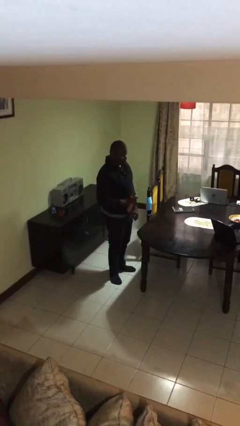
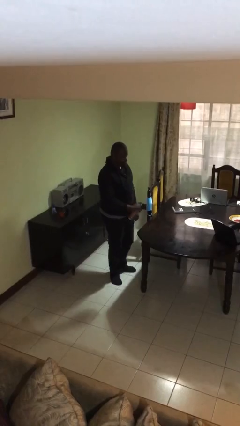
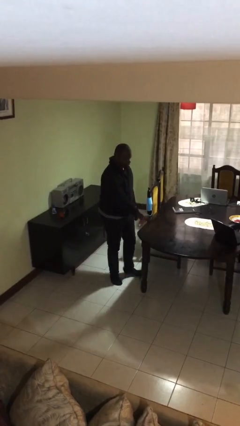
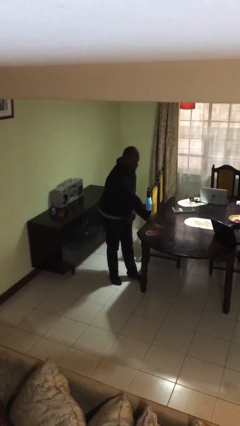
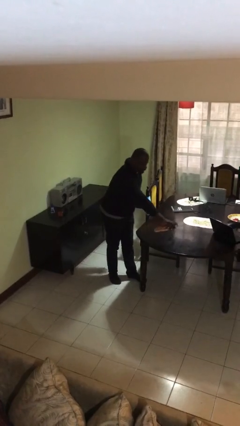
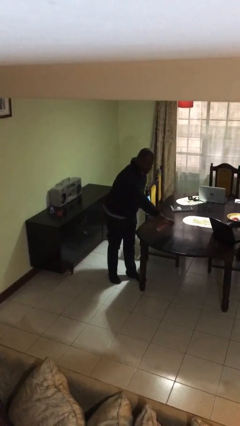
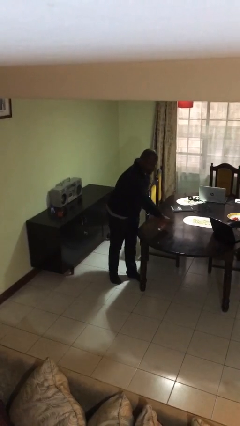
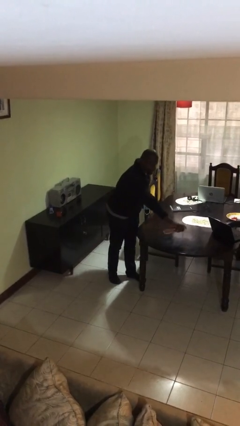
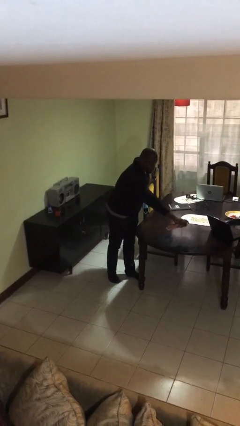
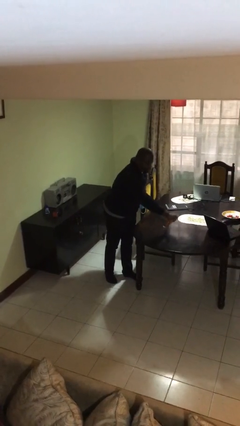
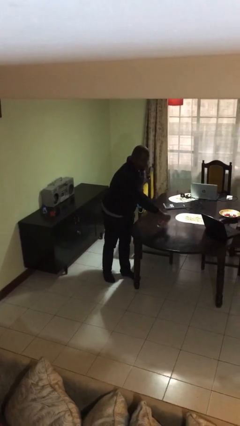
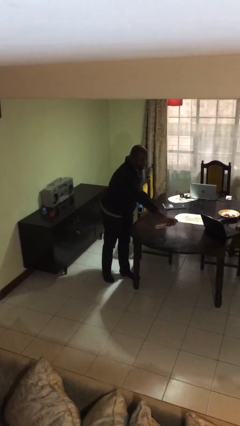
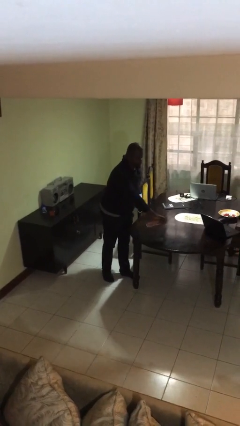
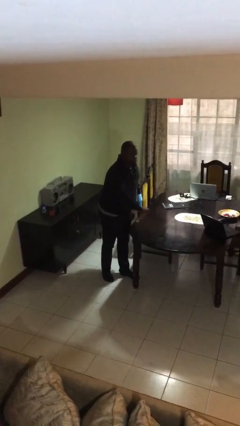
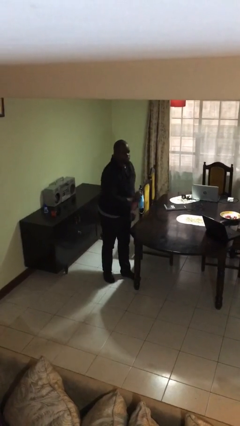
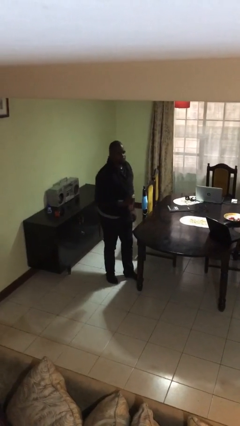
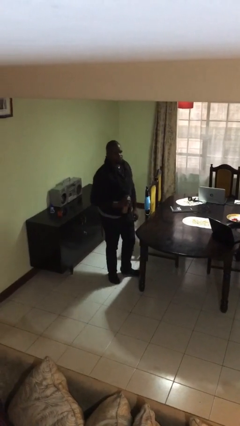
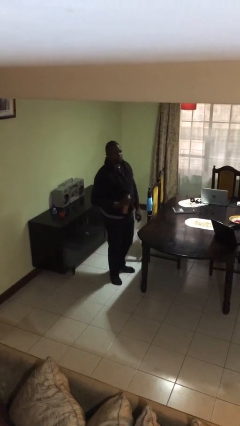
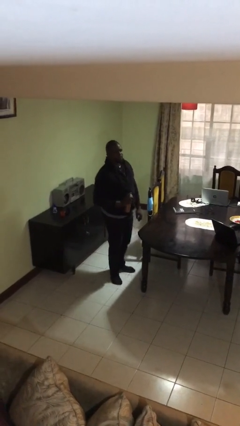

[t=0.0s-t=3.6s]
person sprays from bottle

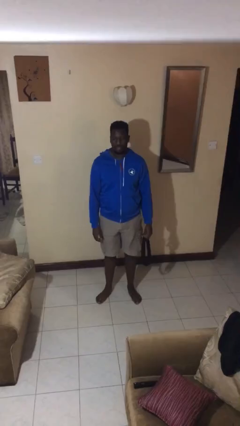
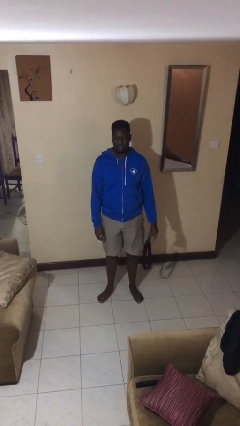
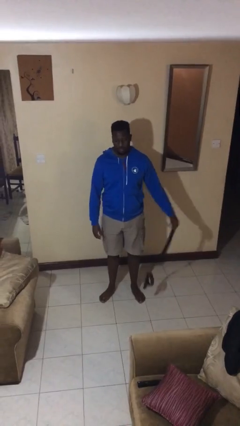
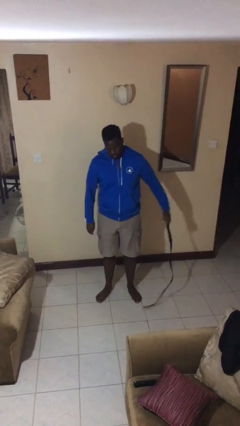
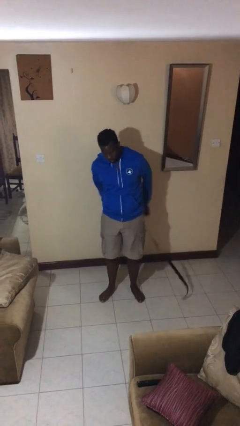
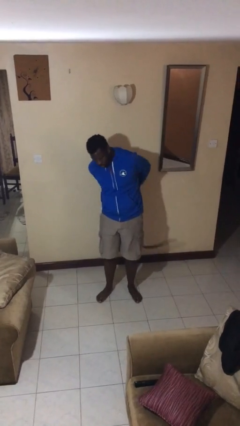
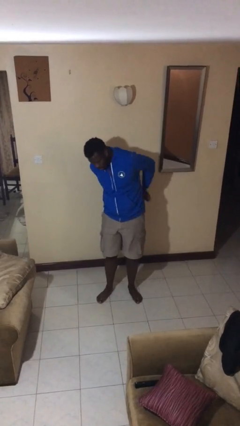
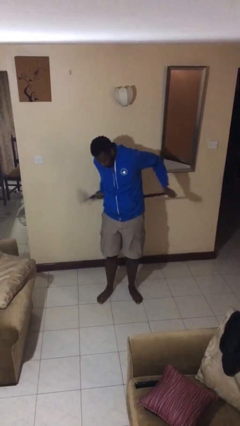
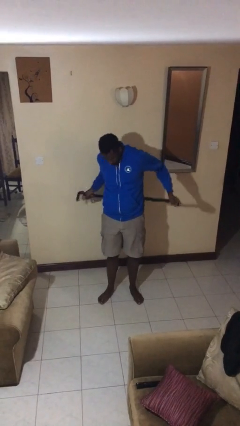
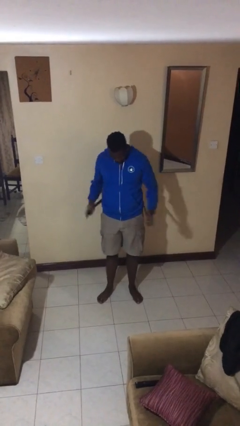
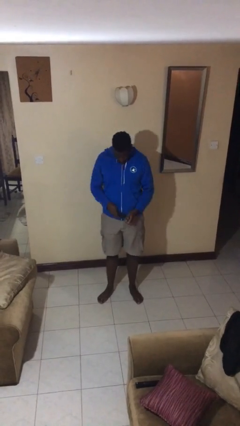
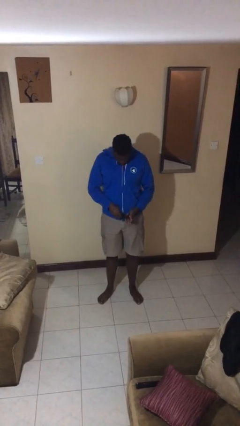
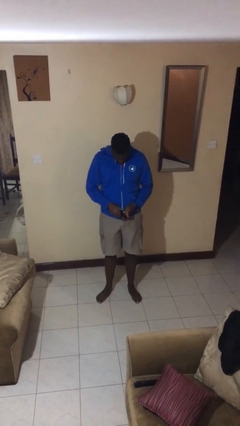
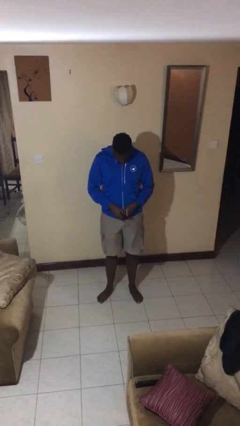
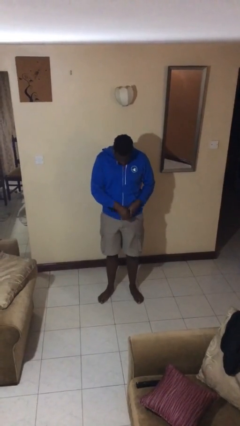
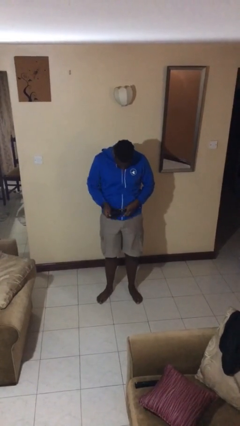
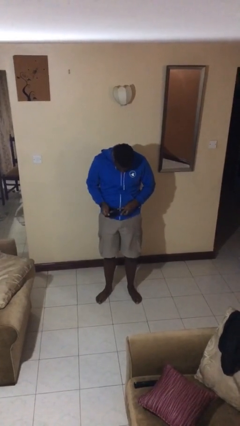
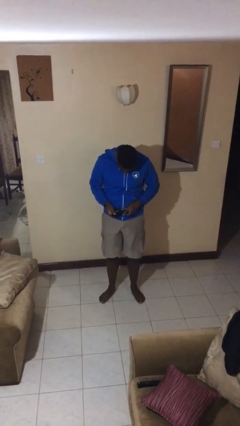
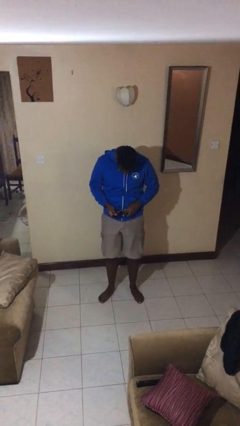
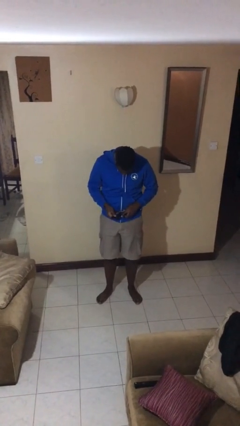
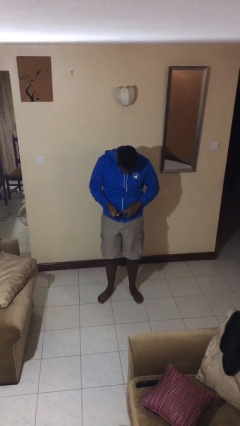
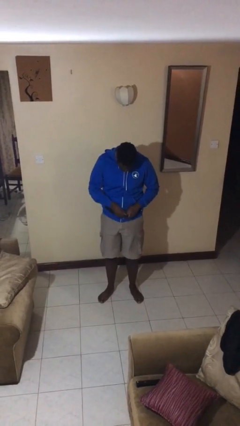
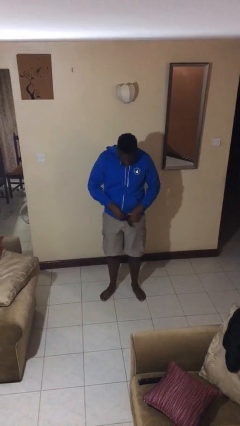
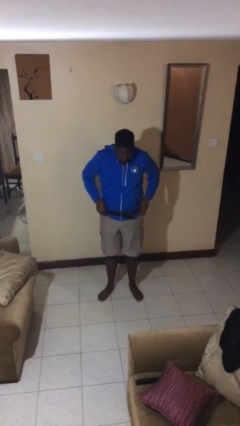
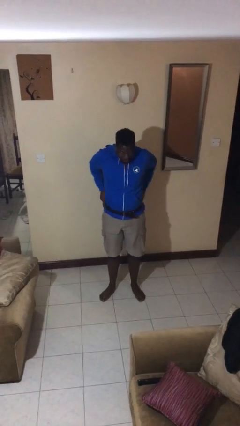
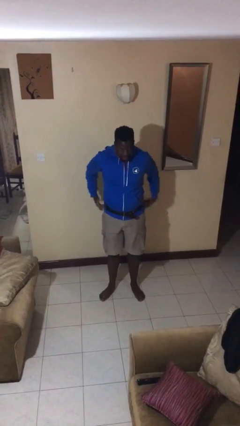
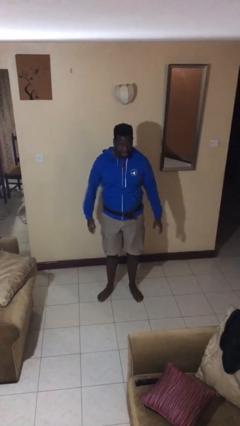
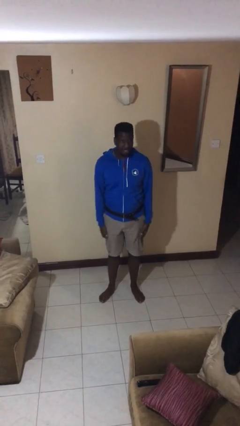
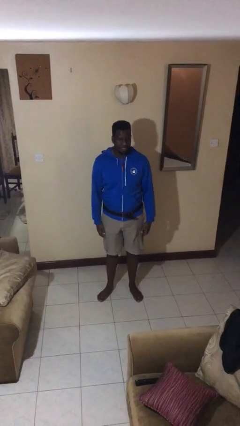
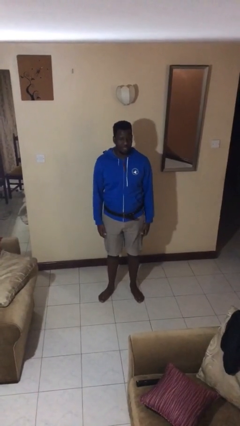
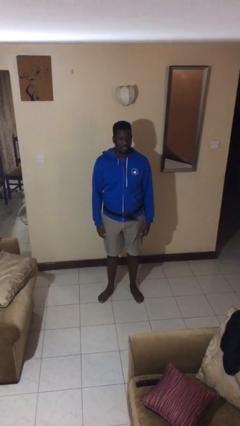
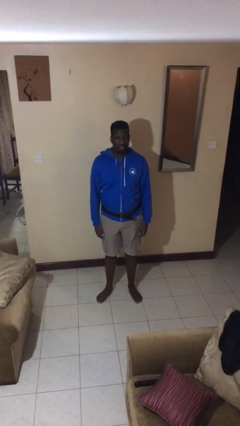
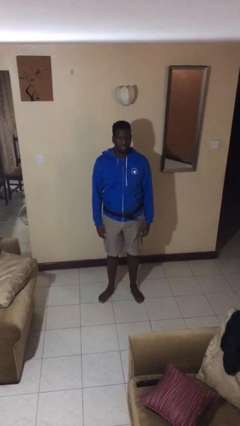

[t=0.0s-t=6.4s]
person puts on belt

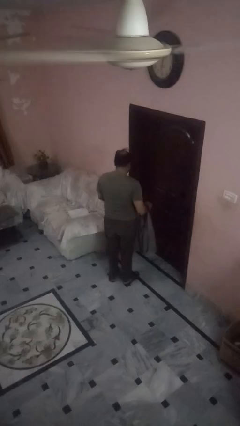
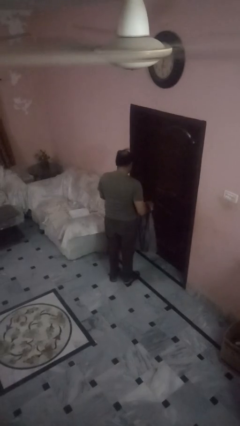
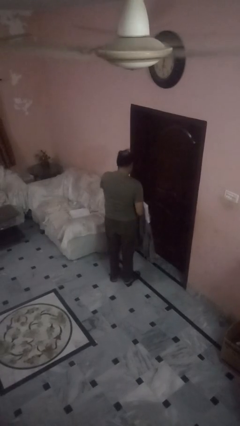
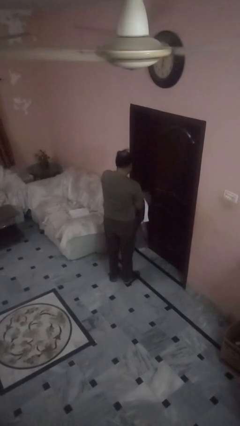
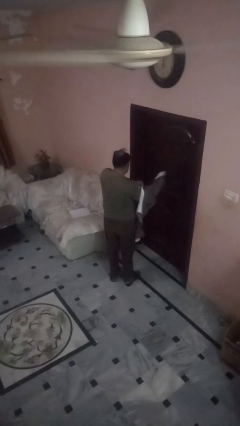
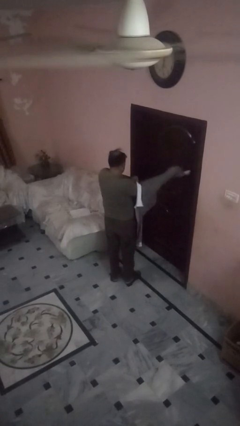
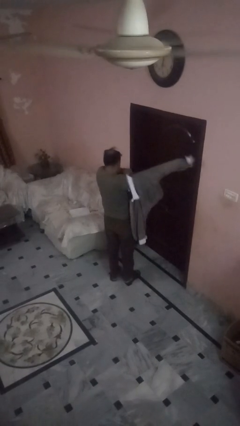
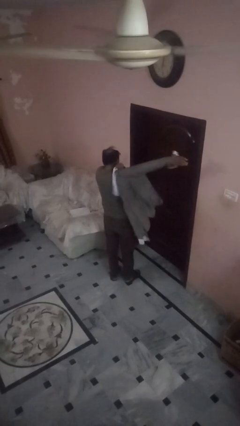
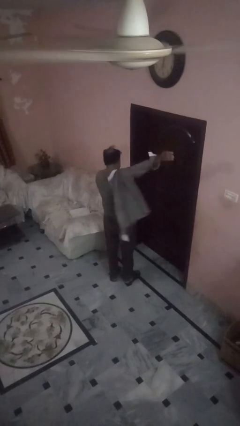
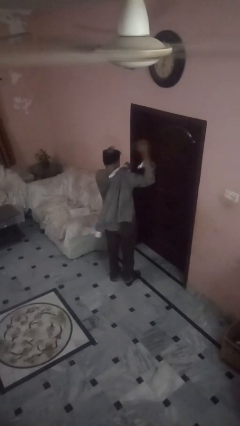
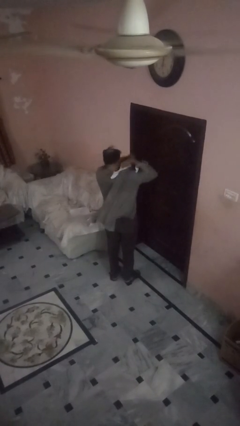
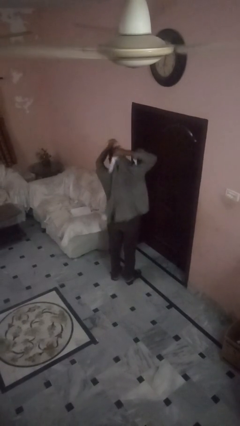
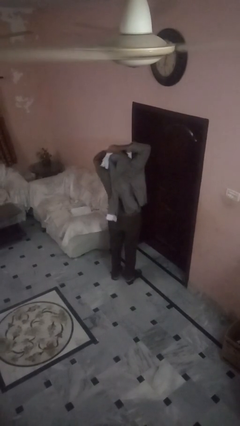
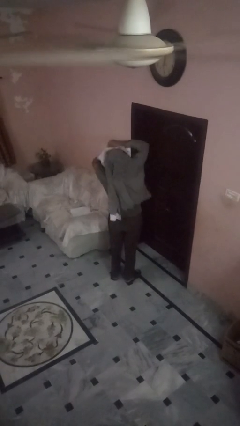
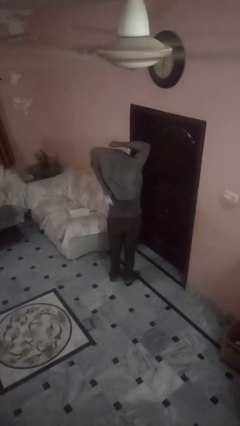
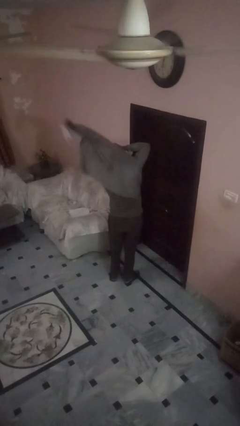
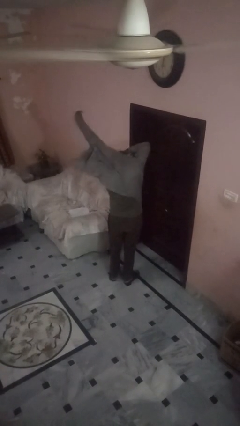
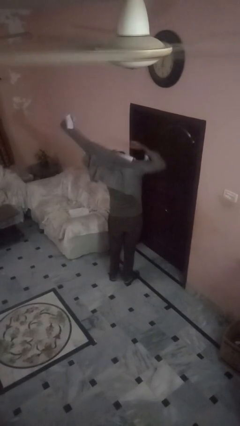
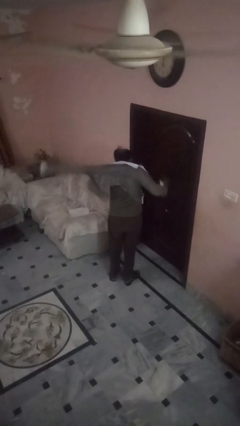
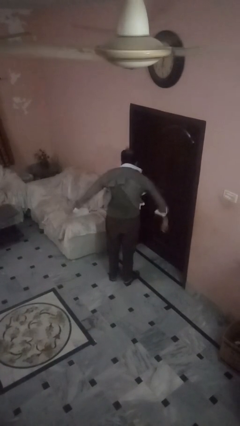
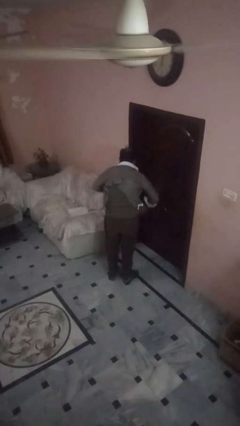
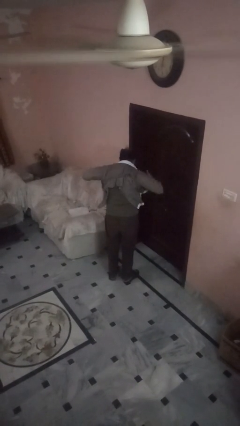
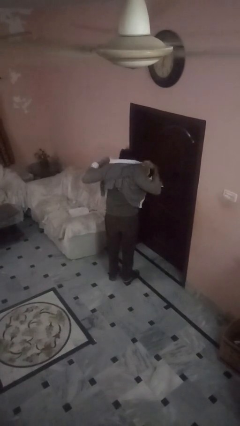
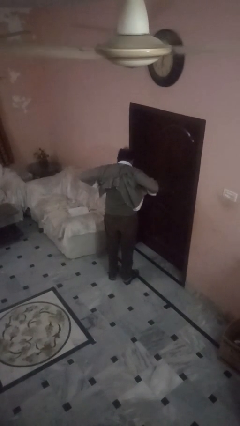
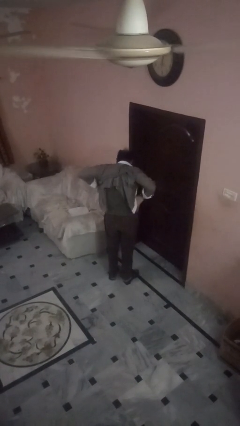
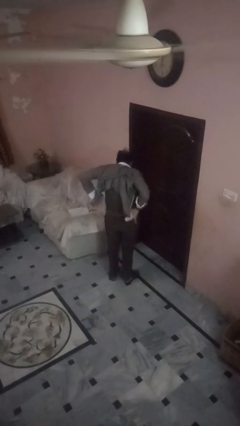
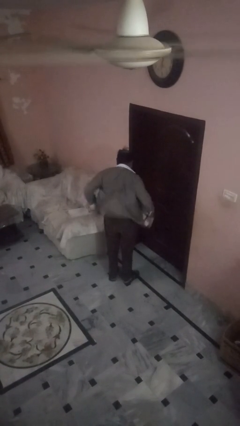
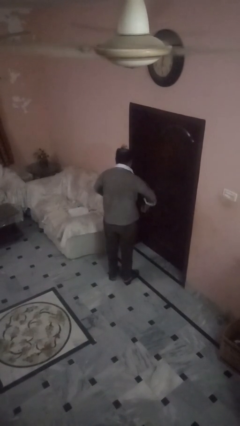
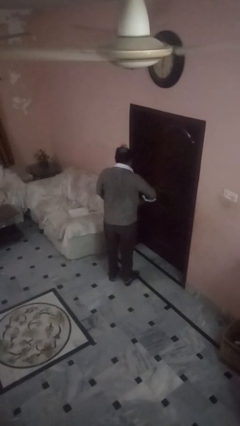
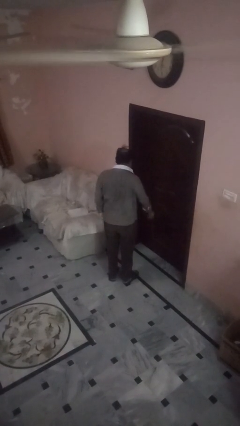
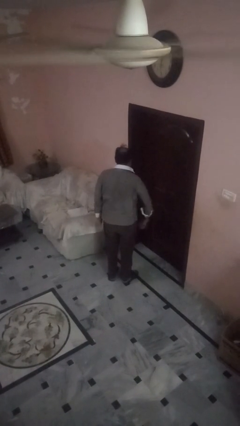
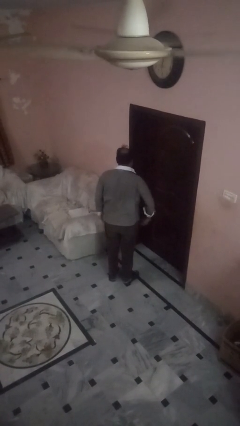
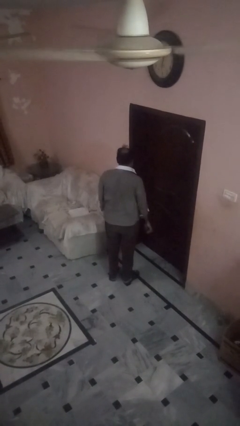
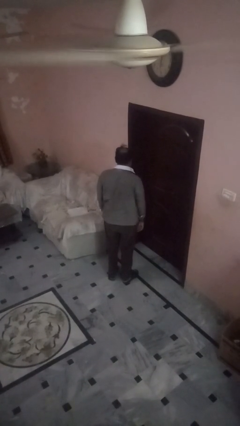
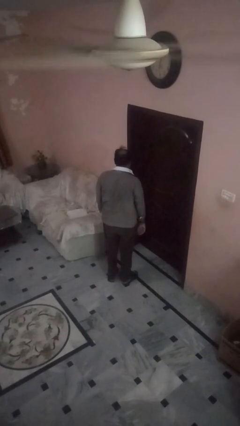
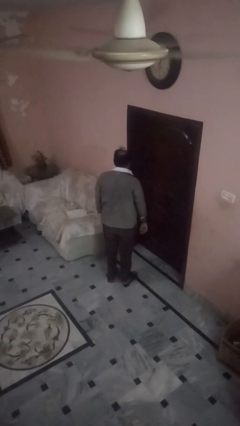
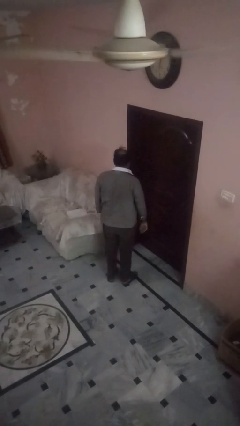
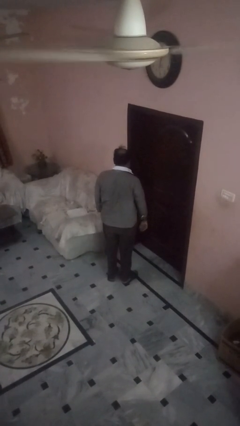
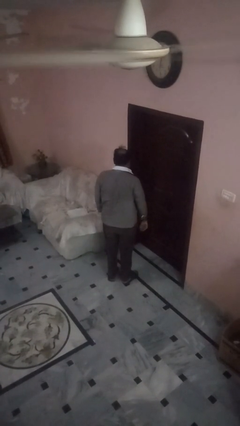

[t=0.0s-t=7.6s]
person puts on shirt

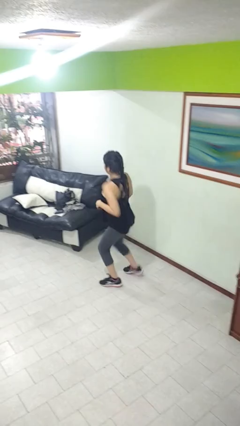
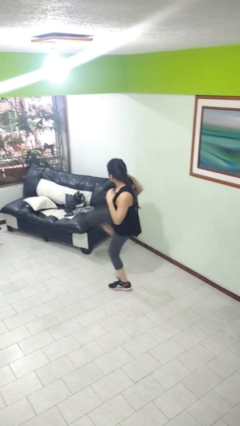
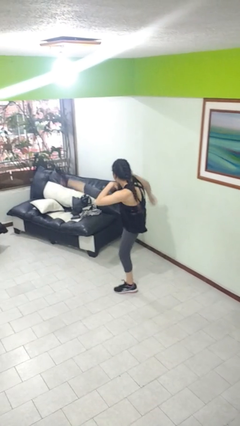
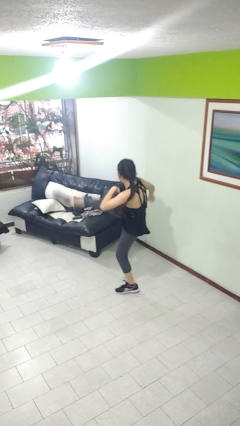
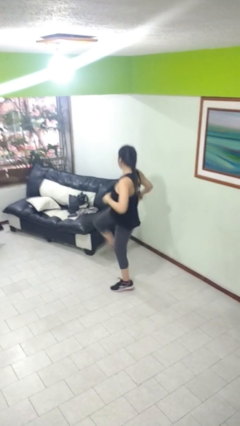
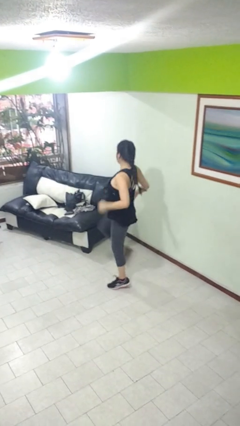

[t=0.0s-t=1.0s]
person karate kicks
